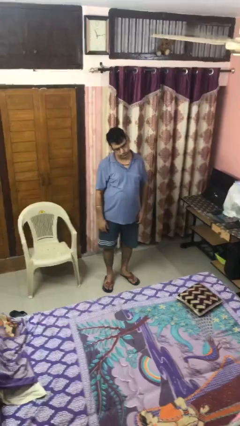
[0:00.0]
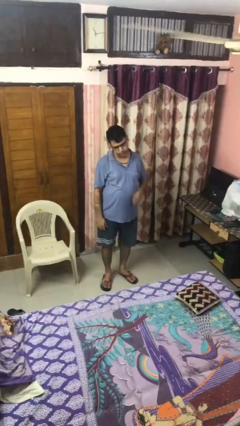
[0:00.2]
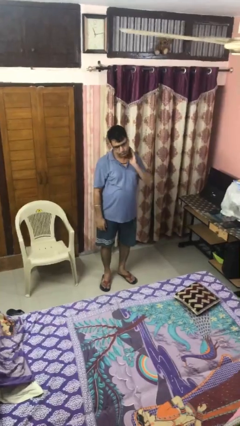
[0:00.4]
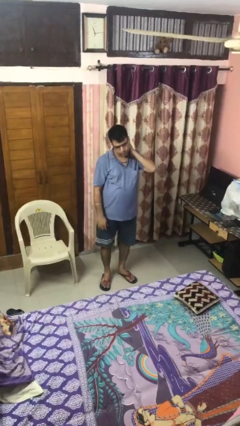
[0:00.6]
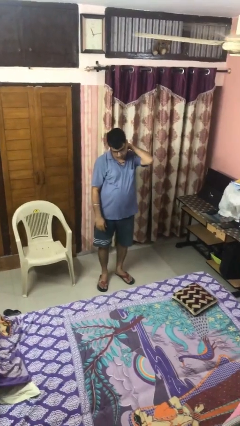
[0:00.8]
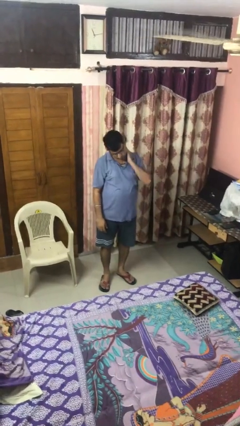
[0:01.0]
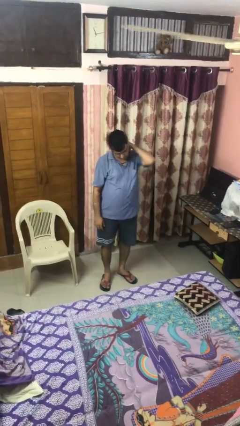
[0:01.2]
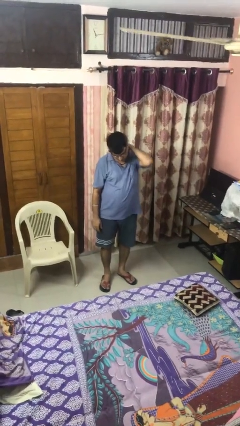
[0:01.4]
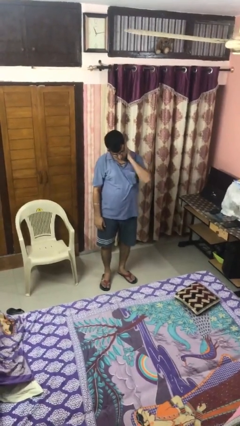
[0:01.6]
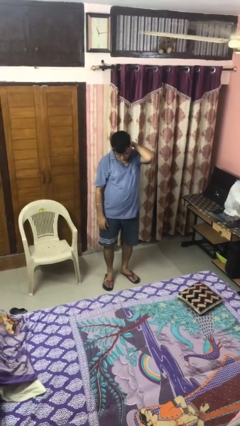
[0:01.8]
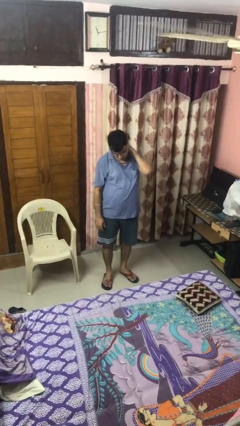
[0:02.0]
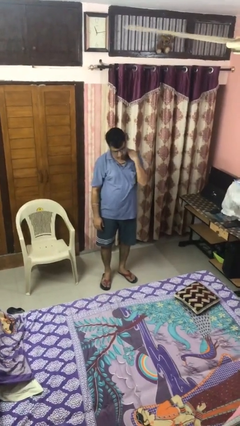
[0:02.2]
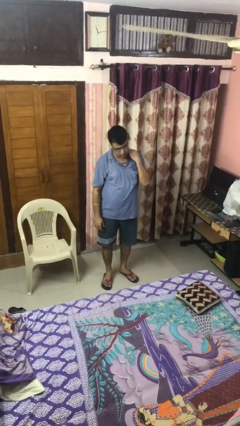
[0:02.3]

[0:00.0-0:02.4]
person rubs neck

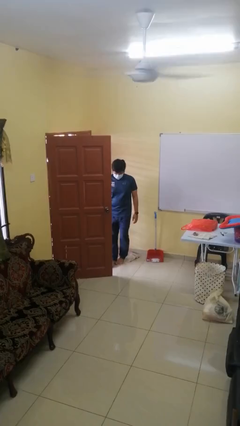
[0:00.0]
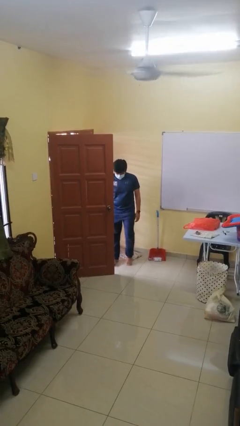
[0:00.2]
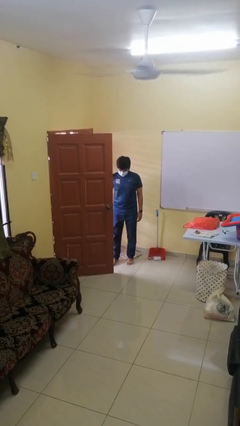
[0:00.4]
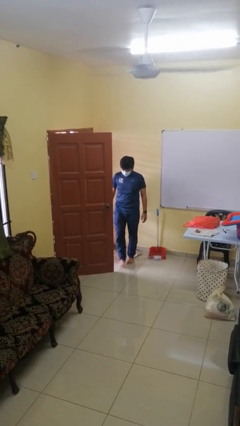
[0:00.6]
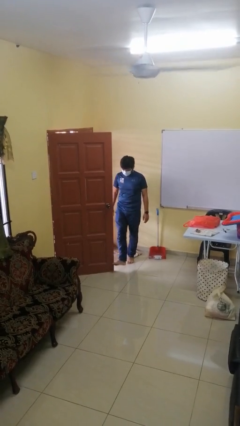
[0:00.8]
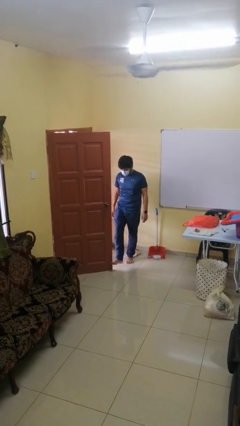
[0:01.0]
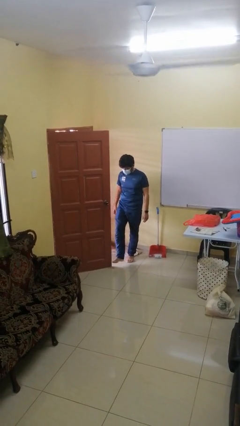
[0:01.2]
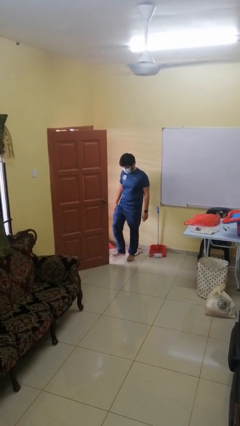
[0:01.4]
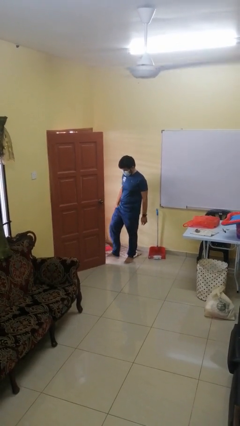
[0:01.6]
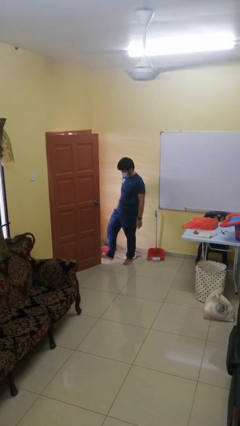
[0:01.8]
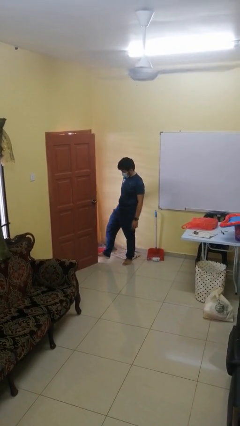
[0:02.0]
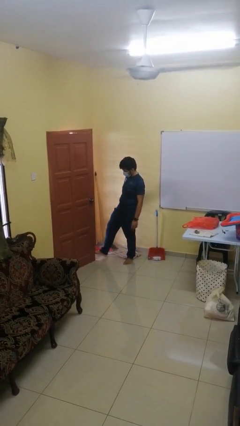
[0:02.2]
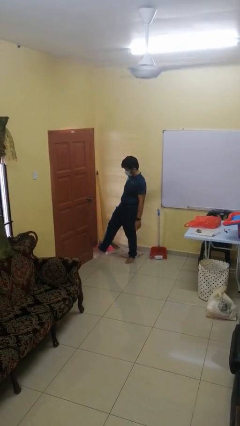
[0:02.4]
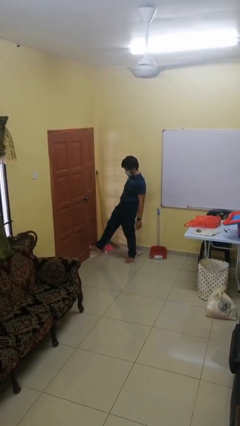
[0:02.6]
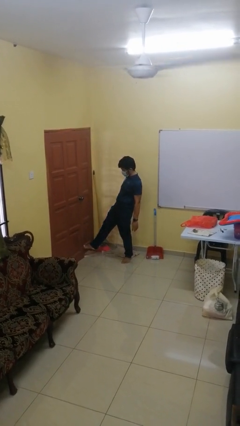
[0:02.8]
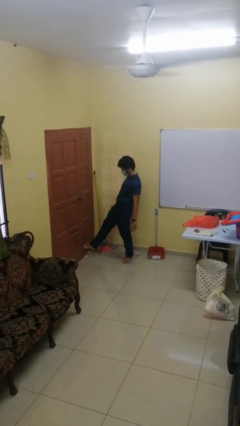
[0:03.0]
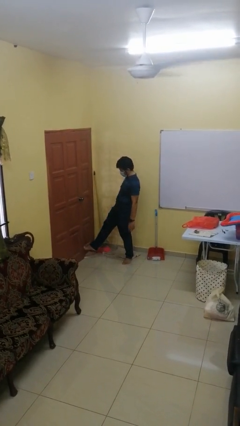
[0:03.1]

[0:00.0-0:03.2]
person closes door with foot

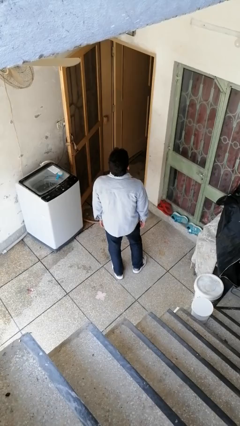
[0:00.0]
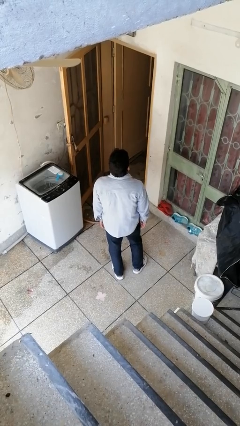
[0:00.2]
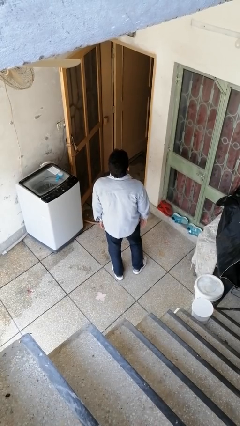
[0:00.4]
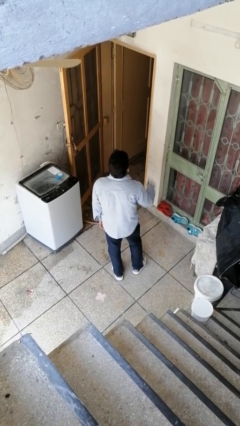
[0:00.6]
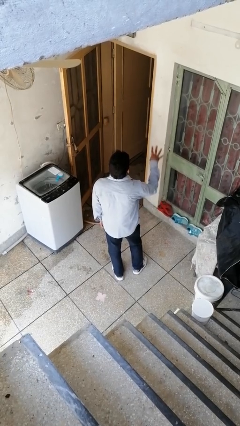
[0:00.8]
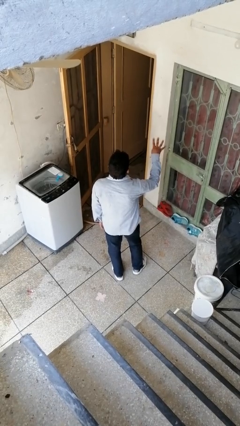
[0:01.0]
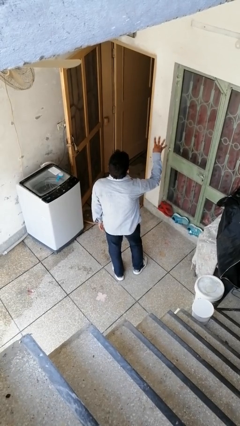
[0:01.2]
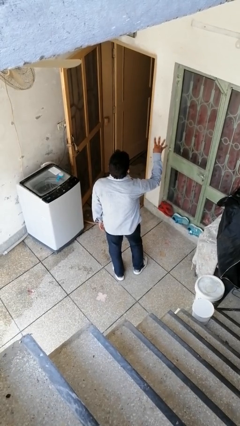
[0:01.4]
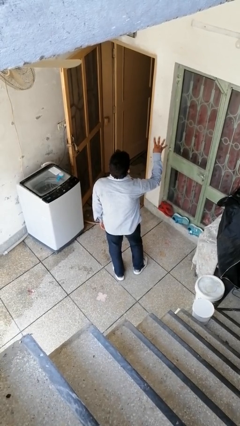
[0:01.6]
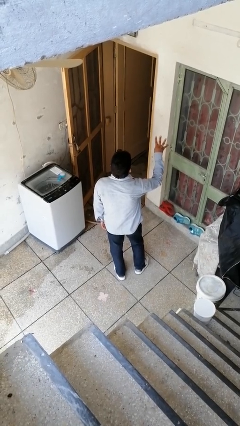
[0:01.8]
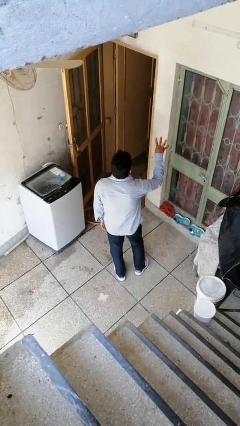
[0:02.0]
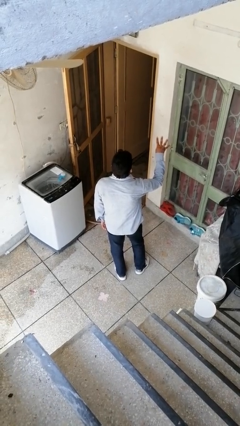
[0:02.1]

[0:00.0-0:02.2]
person gestures number four

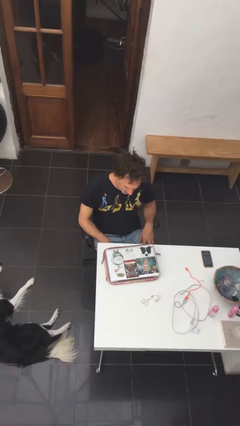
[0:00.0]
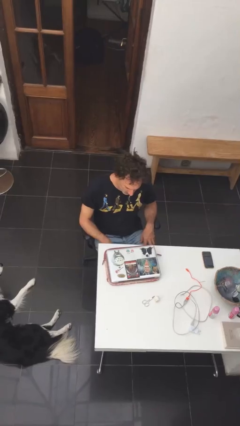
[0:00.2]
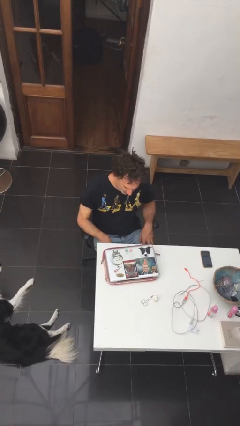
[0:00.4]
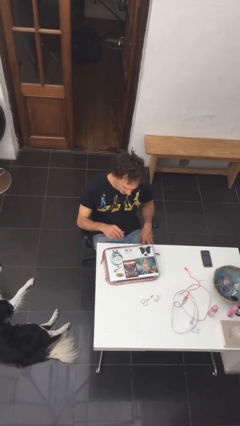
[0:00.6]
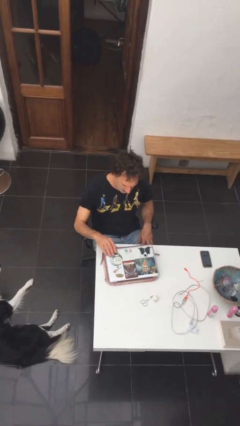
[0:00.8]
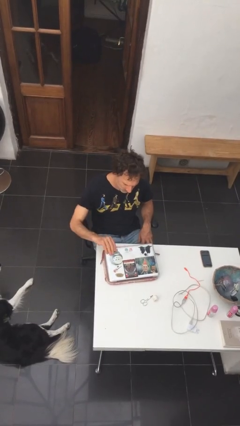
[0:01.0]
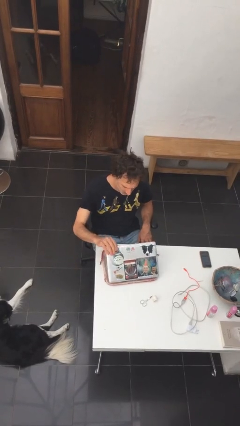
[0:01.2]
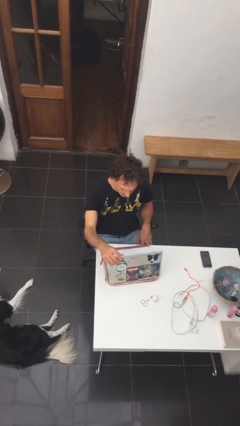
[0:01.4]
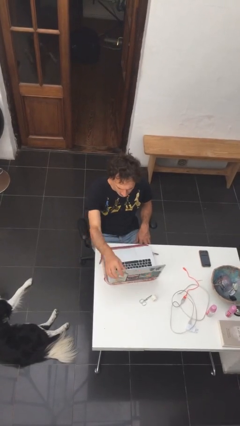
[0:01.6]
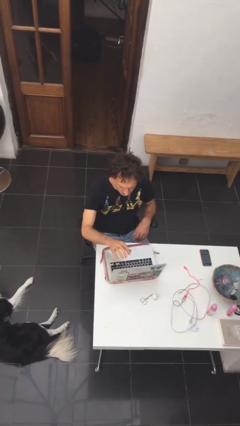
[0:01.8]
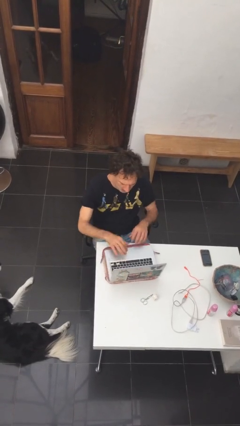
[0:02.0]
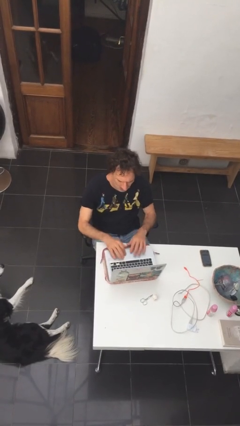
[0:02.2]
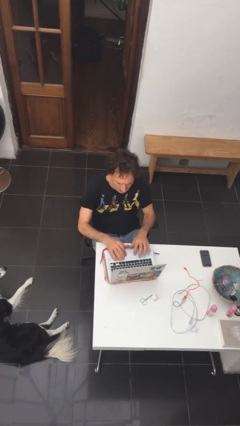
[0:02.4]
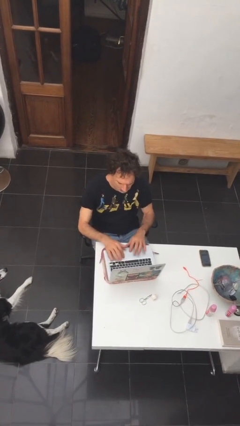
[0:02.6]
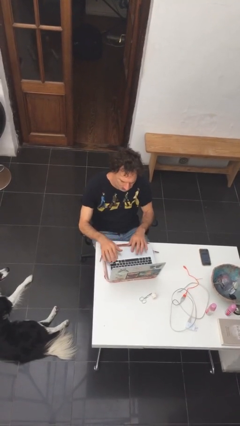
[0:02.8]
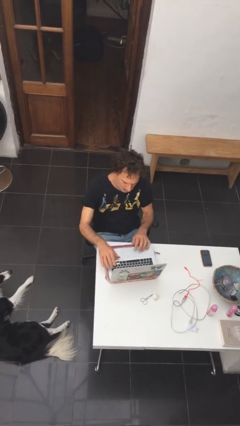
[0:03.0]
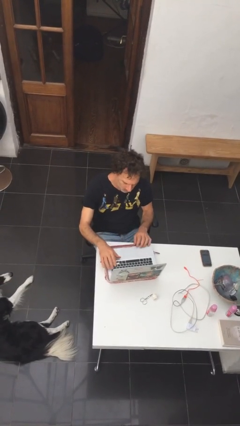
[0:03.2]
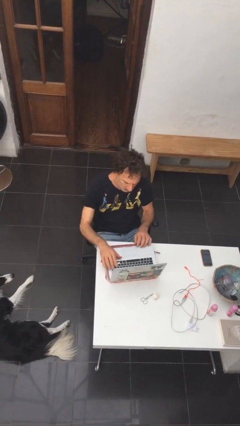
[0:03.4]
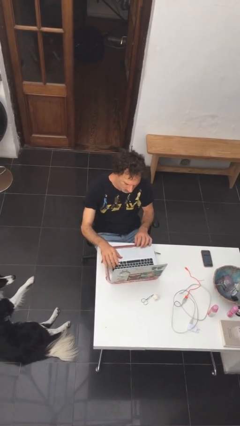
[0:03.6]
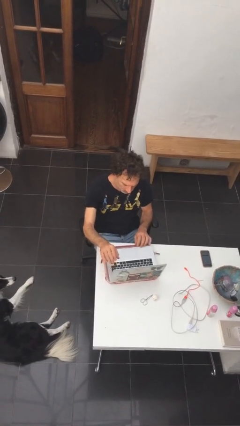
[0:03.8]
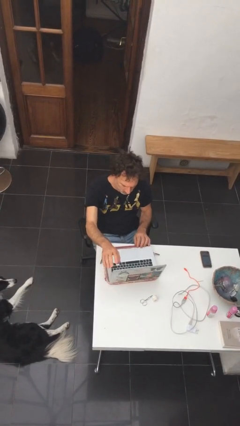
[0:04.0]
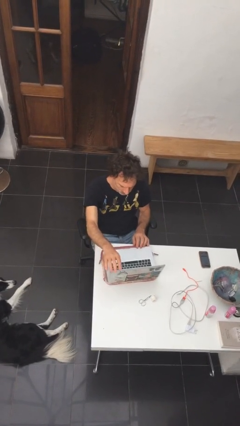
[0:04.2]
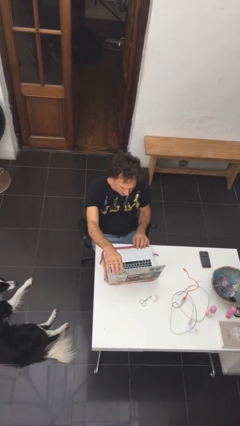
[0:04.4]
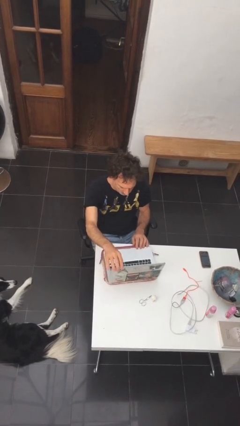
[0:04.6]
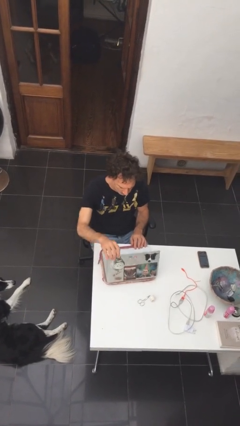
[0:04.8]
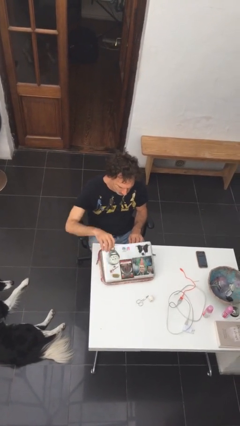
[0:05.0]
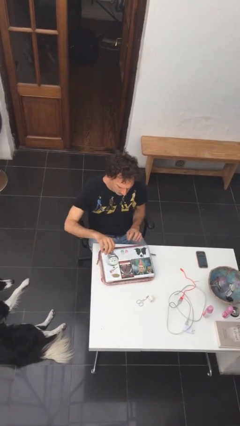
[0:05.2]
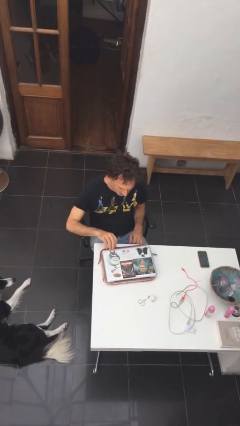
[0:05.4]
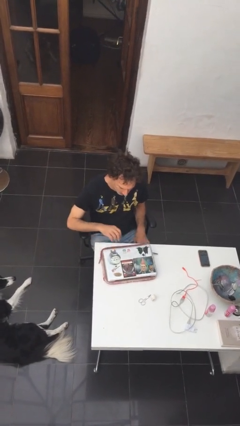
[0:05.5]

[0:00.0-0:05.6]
person interacts with laptop

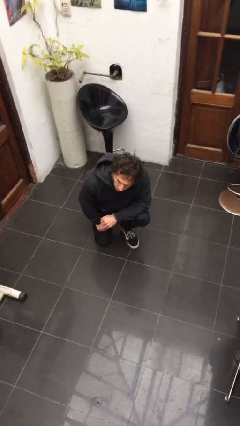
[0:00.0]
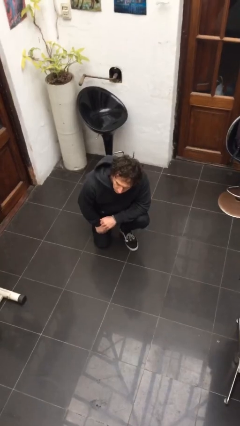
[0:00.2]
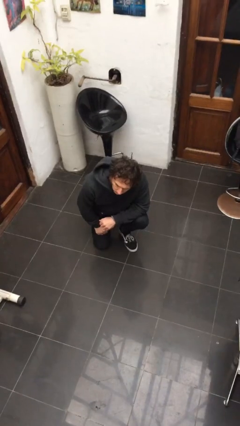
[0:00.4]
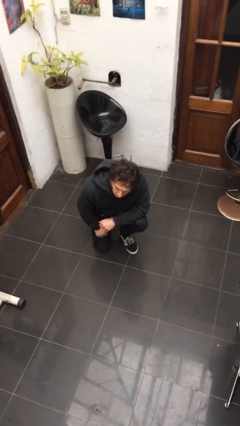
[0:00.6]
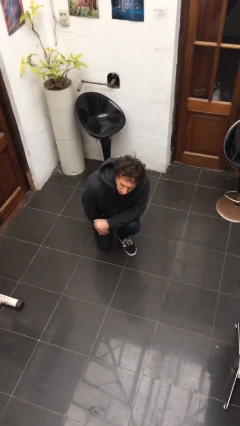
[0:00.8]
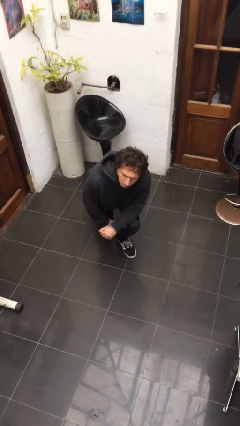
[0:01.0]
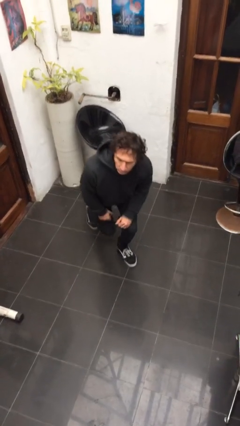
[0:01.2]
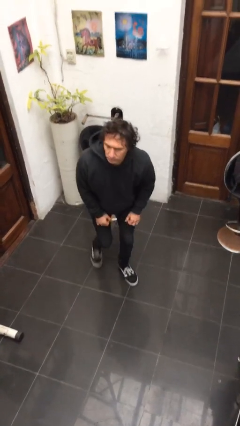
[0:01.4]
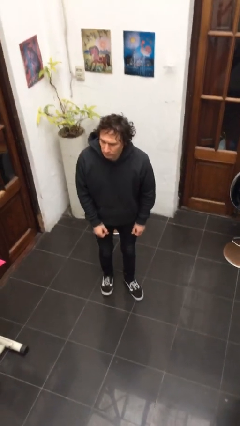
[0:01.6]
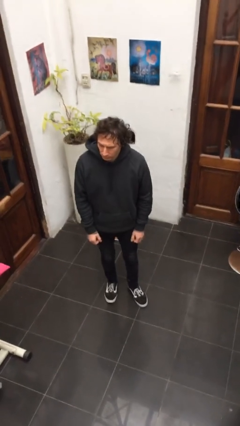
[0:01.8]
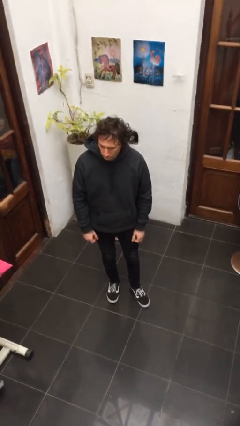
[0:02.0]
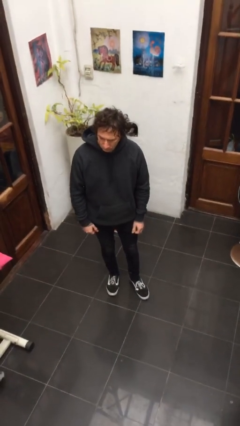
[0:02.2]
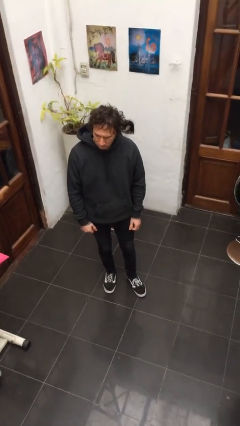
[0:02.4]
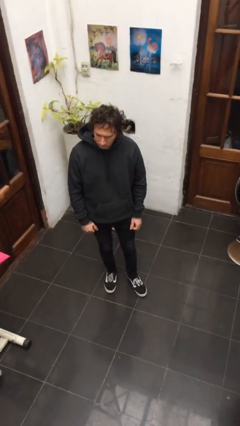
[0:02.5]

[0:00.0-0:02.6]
person stands up from floor

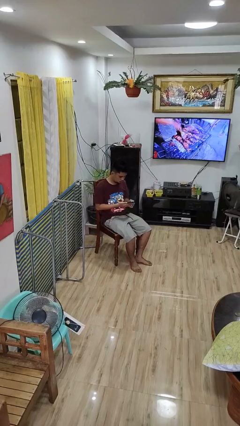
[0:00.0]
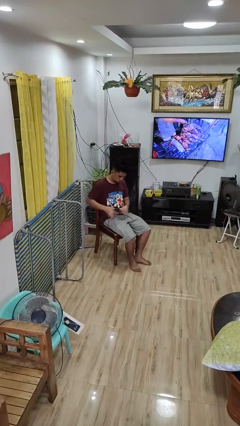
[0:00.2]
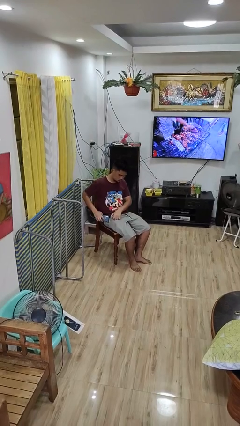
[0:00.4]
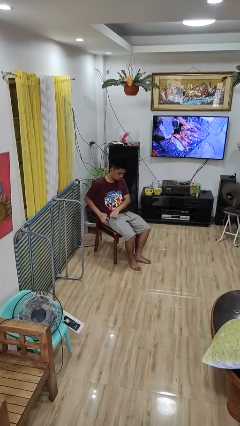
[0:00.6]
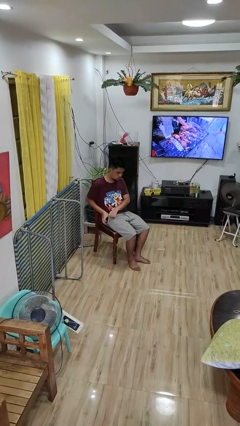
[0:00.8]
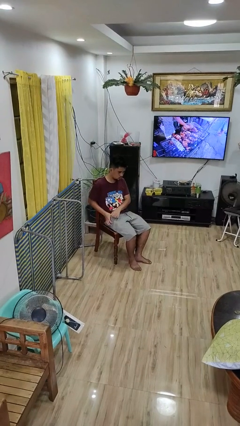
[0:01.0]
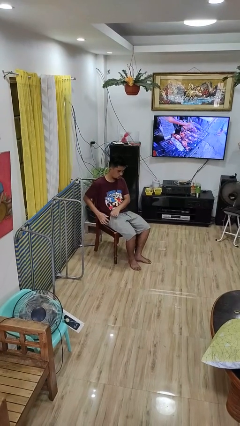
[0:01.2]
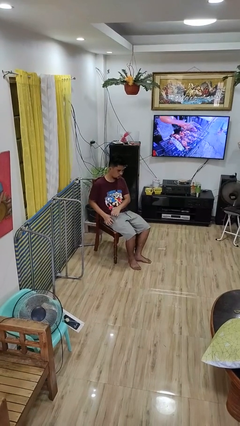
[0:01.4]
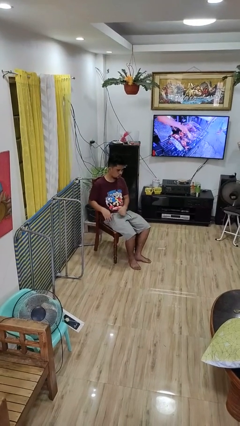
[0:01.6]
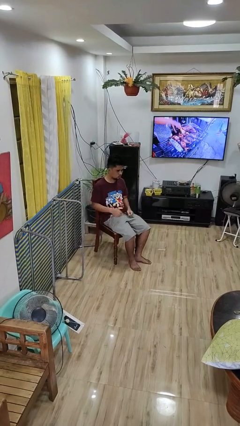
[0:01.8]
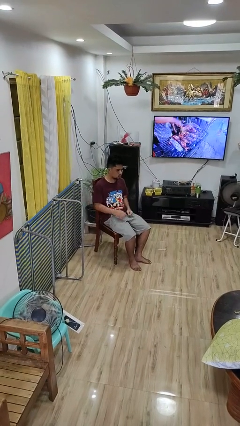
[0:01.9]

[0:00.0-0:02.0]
person puts phone into pocket

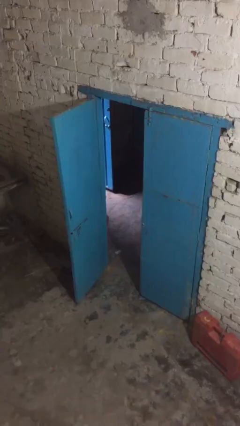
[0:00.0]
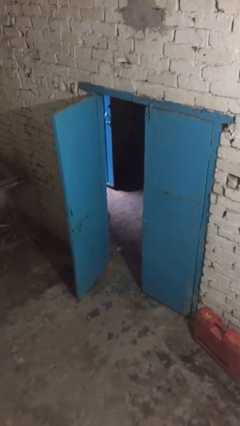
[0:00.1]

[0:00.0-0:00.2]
person closes facility door
